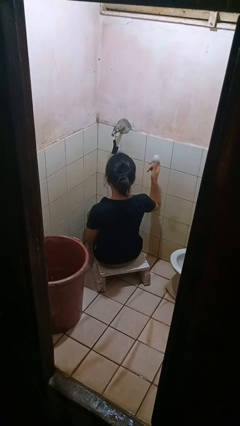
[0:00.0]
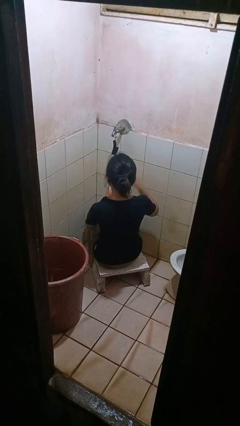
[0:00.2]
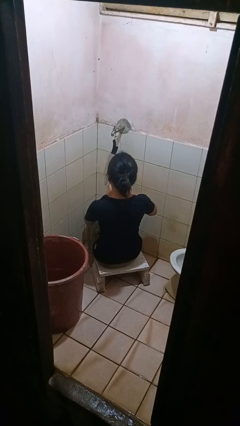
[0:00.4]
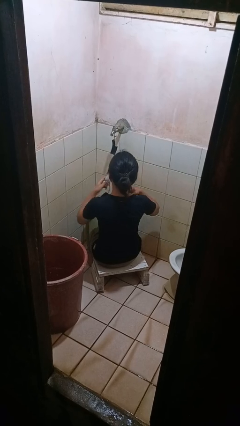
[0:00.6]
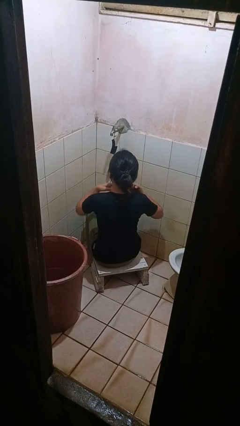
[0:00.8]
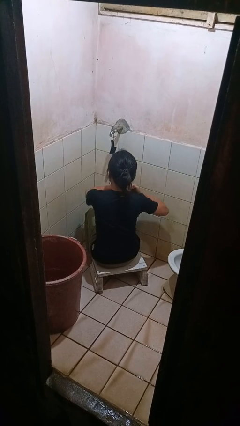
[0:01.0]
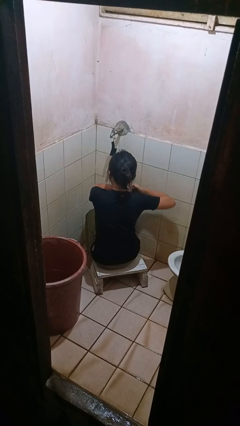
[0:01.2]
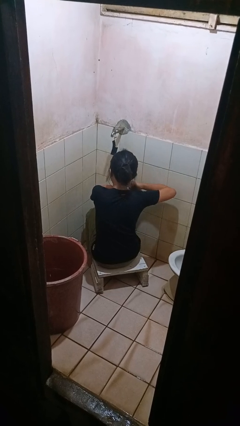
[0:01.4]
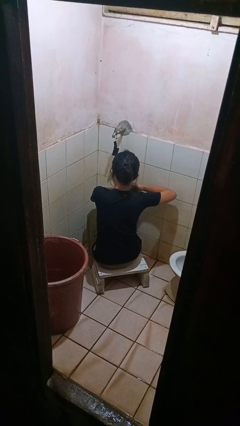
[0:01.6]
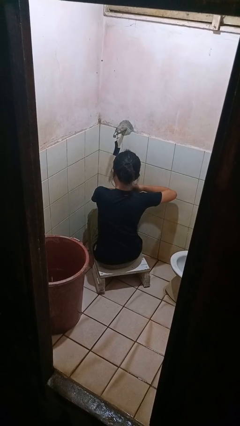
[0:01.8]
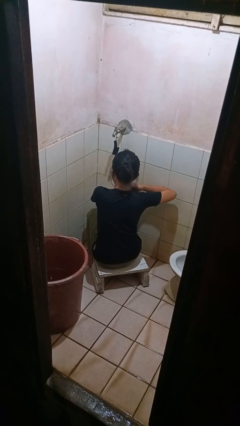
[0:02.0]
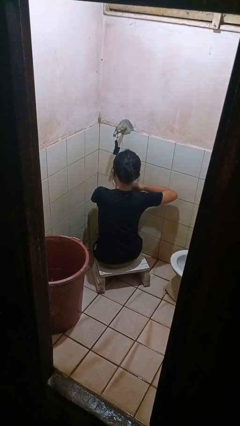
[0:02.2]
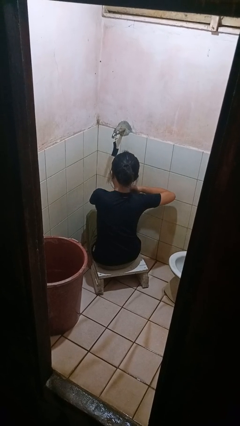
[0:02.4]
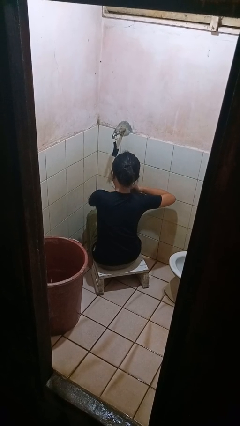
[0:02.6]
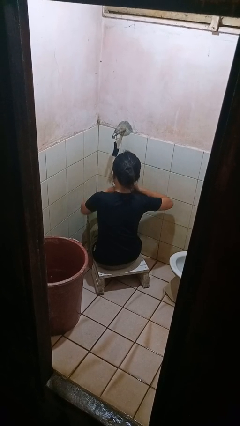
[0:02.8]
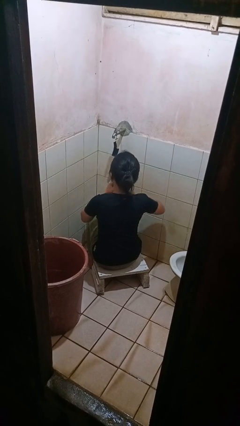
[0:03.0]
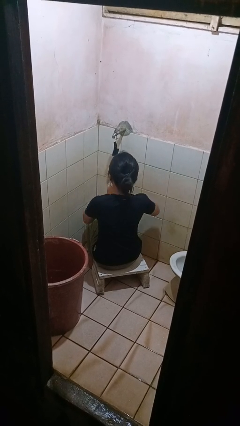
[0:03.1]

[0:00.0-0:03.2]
person applies deodorant

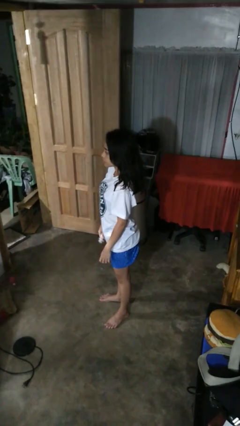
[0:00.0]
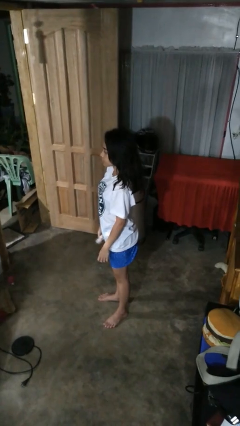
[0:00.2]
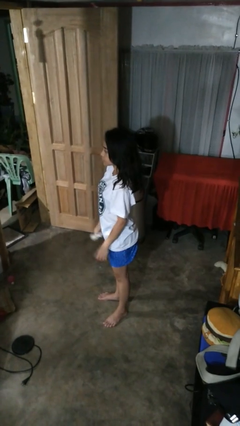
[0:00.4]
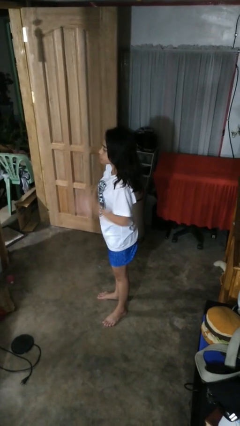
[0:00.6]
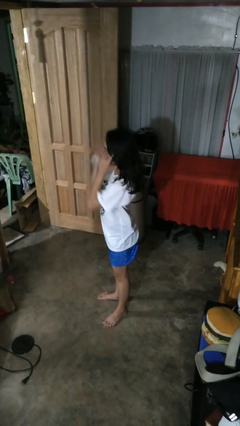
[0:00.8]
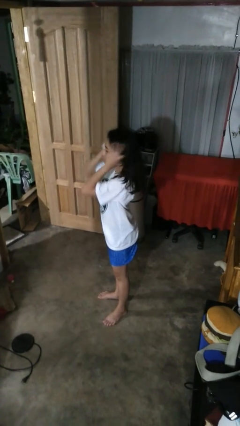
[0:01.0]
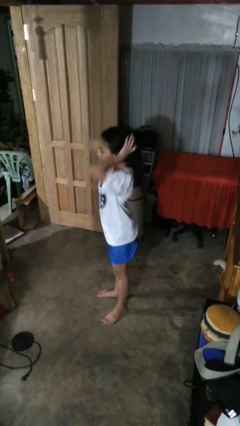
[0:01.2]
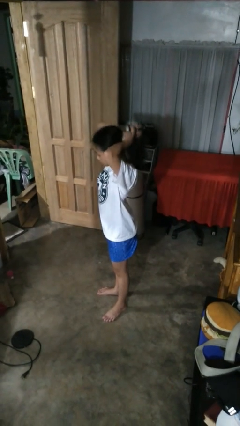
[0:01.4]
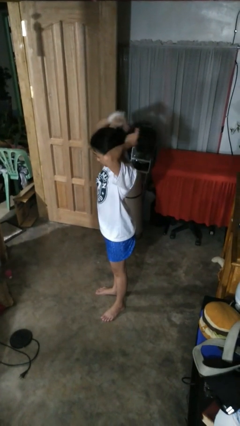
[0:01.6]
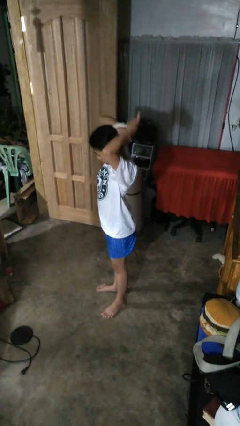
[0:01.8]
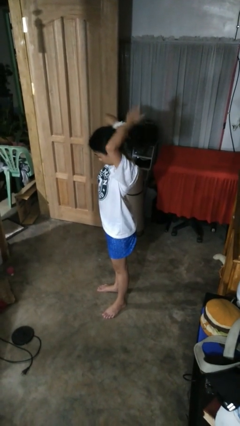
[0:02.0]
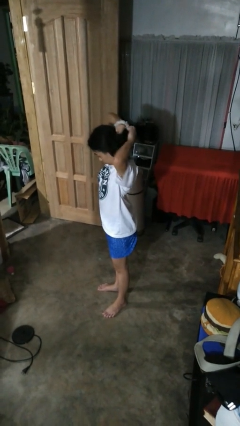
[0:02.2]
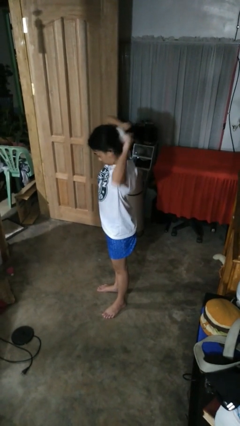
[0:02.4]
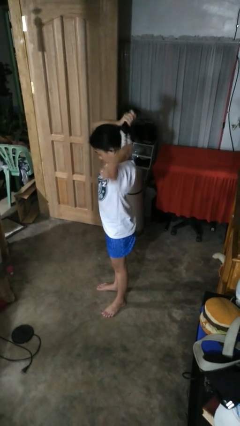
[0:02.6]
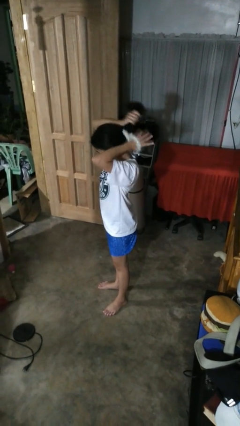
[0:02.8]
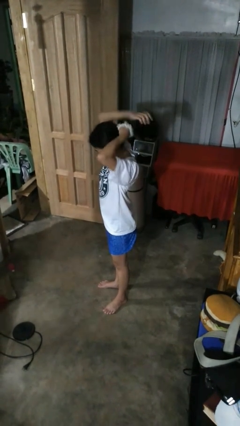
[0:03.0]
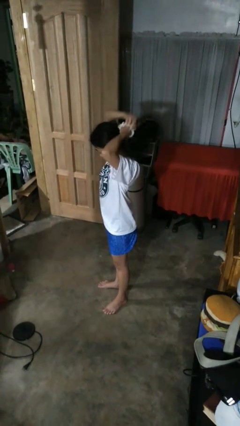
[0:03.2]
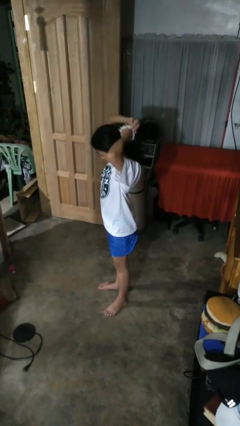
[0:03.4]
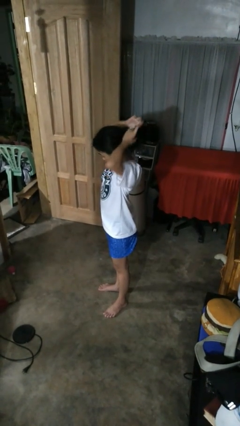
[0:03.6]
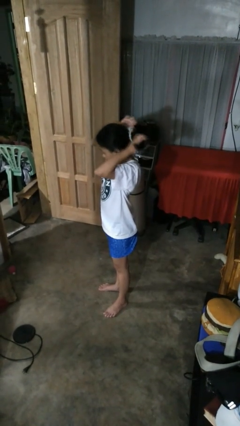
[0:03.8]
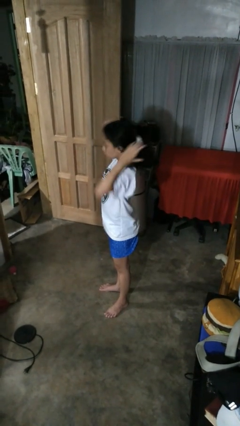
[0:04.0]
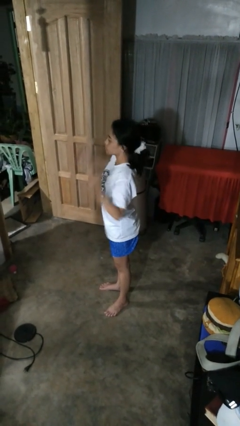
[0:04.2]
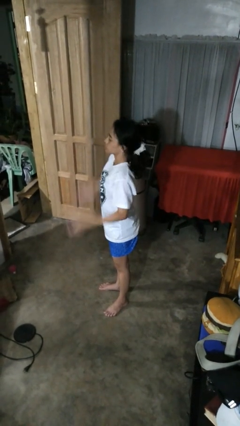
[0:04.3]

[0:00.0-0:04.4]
person puts hair in ponytail

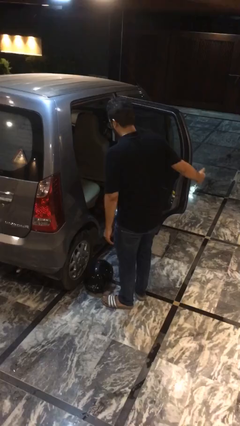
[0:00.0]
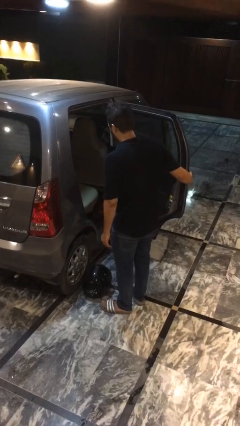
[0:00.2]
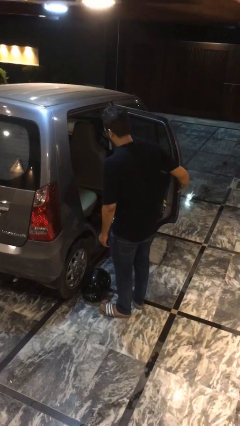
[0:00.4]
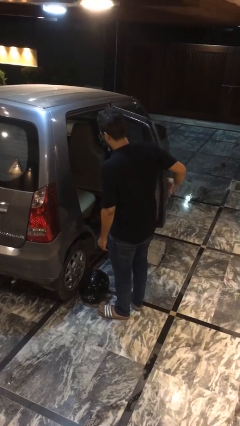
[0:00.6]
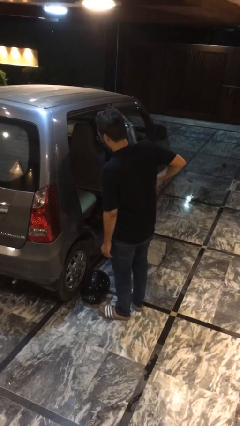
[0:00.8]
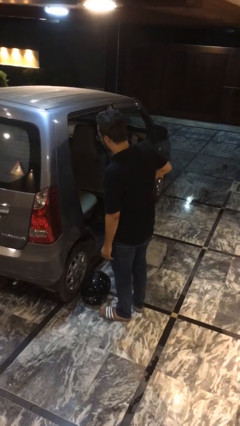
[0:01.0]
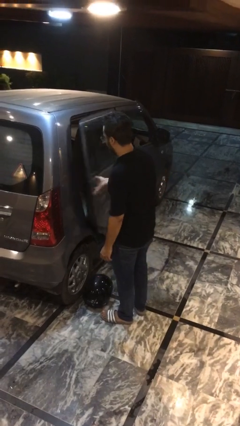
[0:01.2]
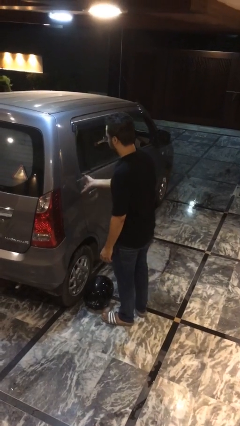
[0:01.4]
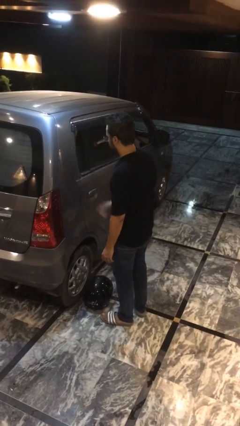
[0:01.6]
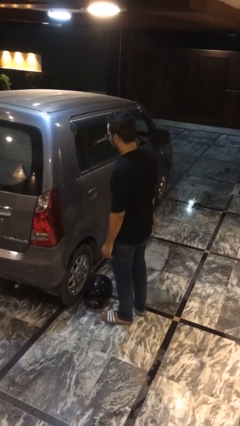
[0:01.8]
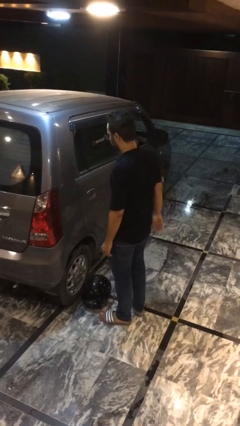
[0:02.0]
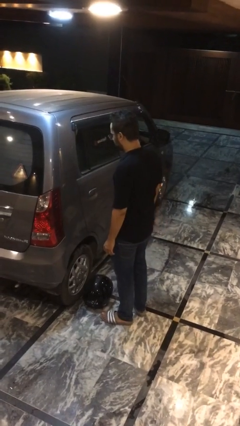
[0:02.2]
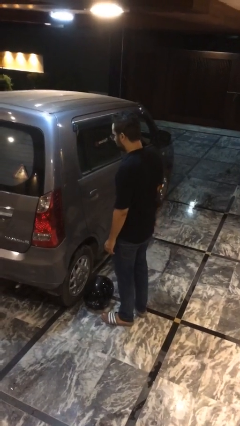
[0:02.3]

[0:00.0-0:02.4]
person closes car door

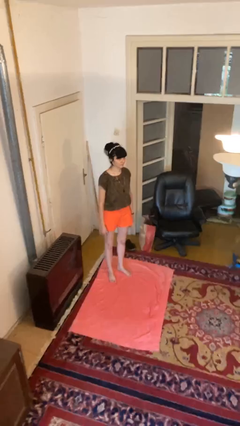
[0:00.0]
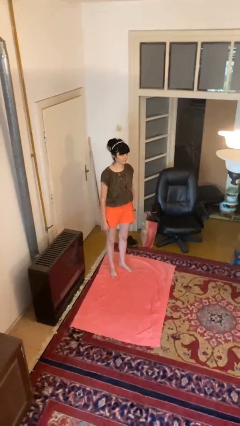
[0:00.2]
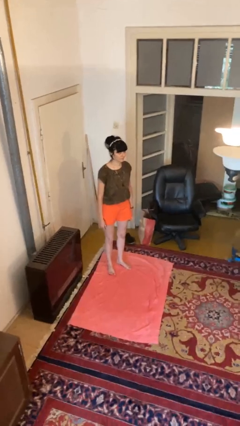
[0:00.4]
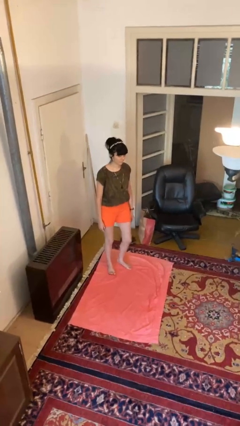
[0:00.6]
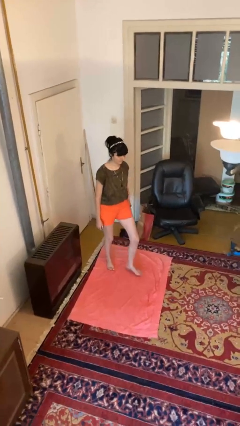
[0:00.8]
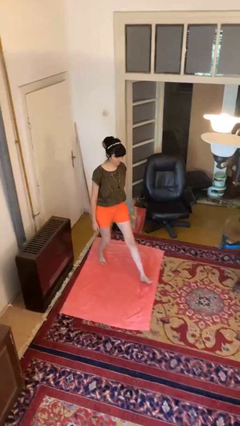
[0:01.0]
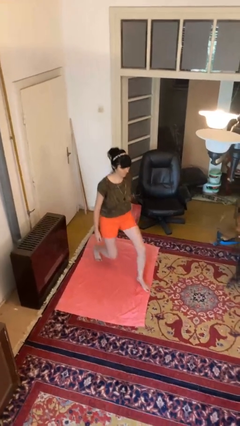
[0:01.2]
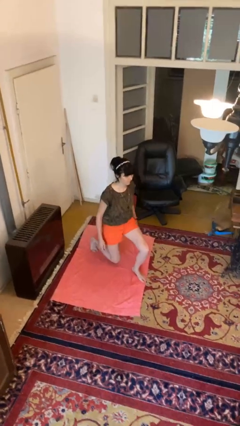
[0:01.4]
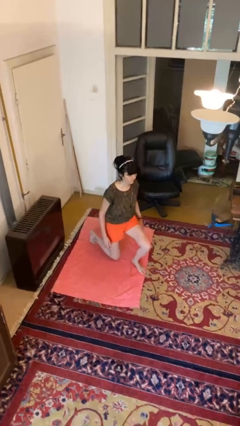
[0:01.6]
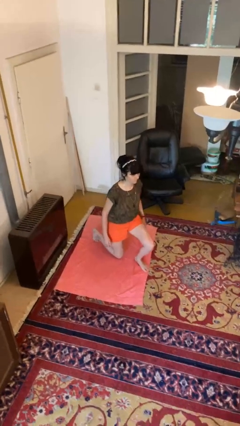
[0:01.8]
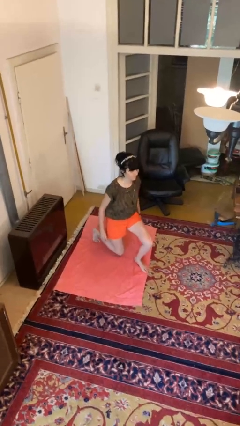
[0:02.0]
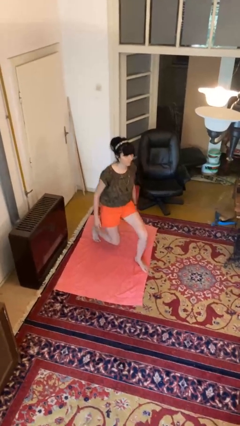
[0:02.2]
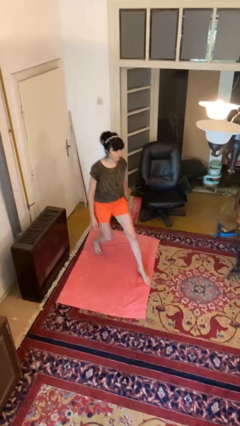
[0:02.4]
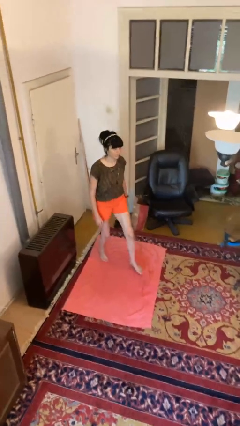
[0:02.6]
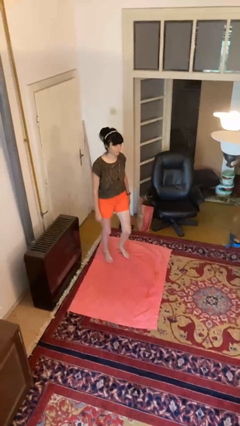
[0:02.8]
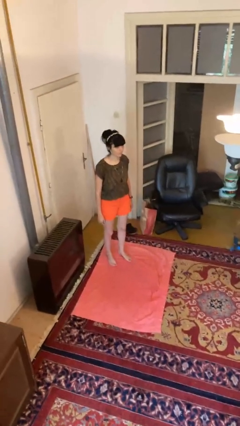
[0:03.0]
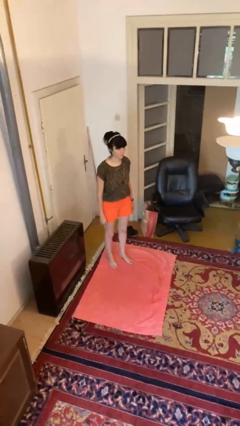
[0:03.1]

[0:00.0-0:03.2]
person exercises with lunges

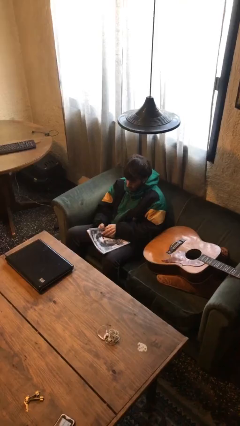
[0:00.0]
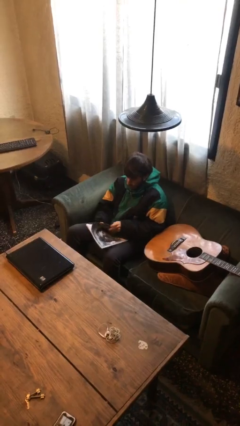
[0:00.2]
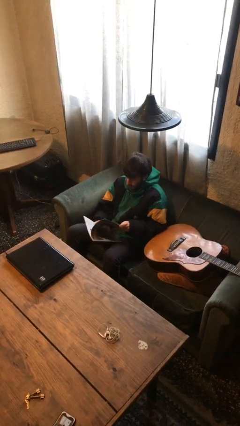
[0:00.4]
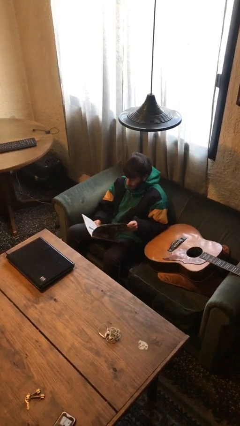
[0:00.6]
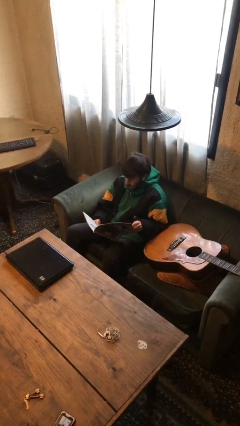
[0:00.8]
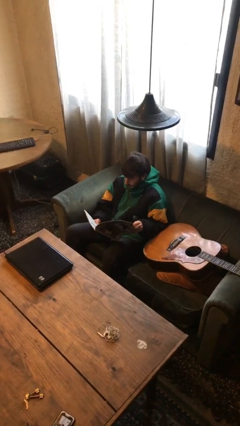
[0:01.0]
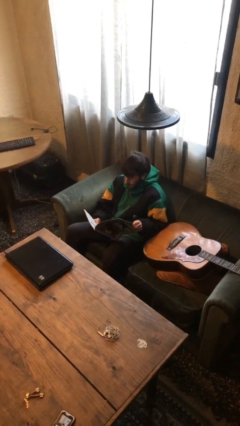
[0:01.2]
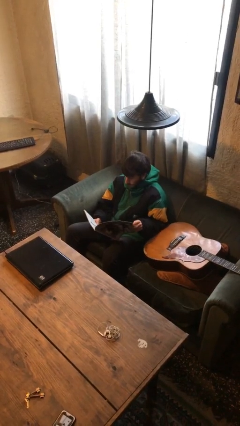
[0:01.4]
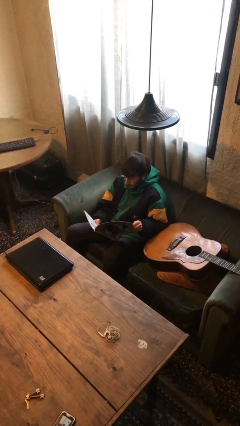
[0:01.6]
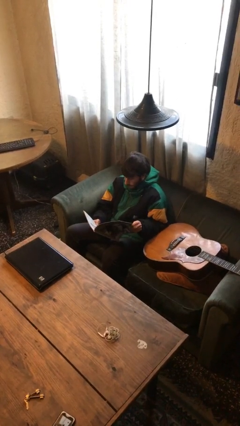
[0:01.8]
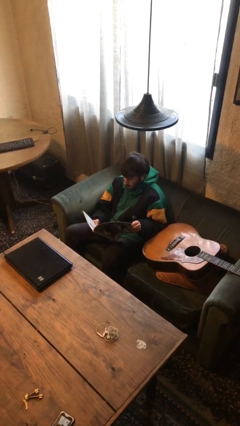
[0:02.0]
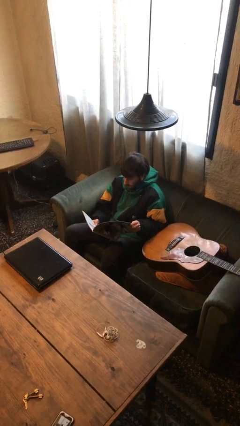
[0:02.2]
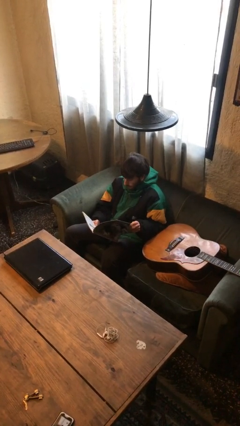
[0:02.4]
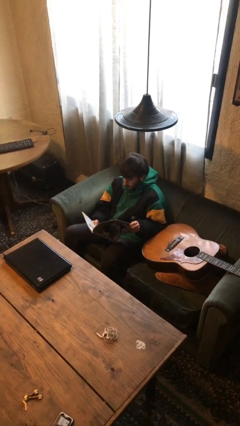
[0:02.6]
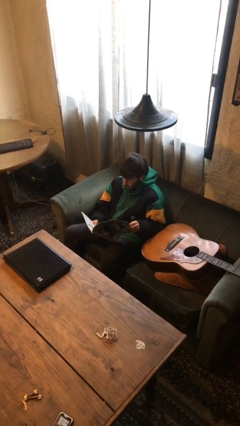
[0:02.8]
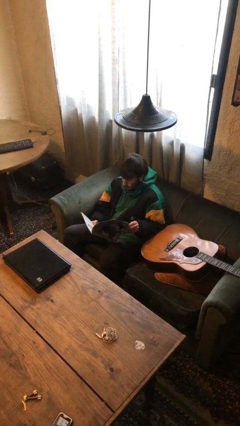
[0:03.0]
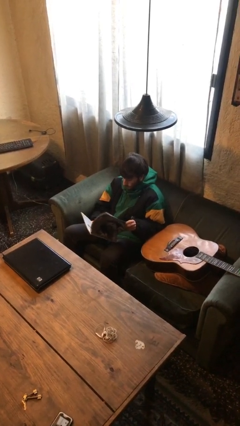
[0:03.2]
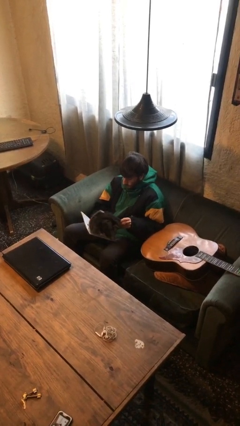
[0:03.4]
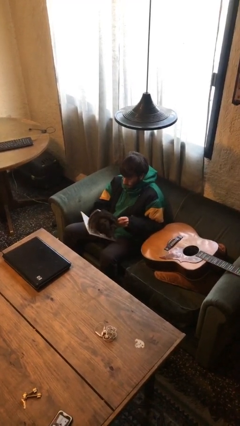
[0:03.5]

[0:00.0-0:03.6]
person reads magazine

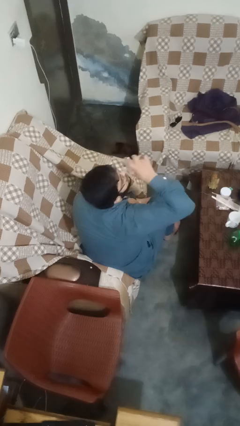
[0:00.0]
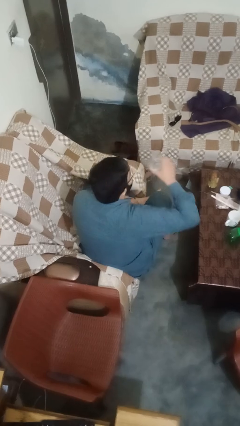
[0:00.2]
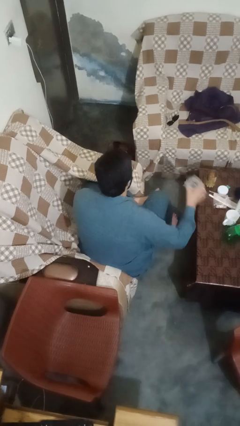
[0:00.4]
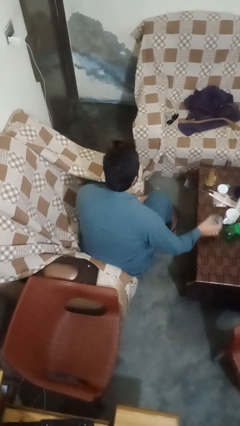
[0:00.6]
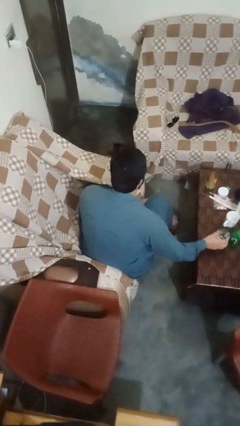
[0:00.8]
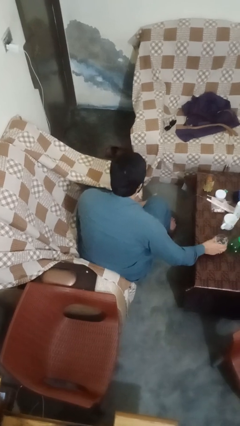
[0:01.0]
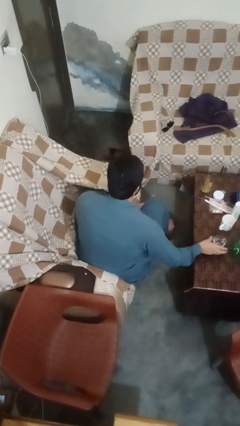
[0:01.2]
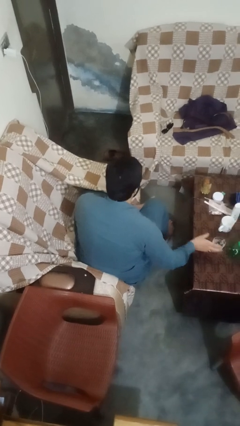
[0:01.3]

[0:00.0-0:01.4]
person puts down object on table
